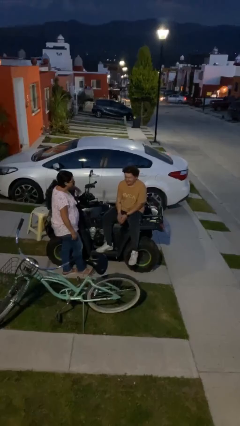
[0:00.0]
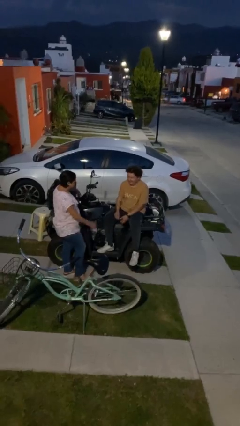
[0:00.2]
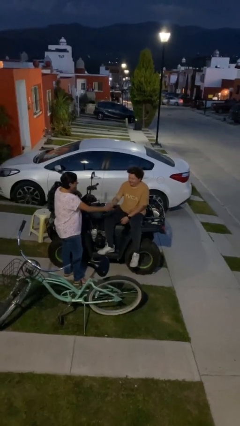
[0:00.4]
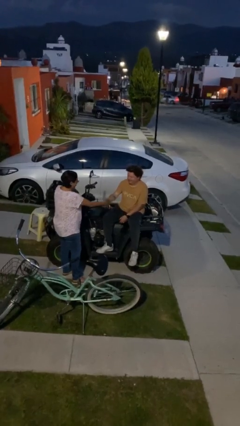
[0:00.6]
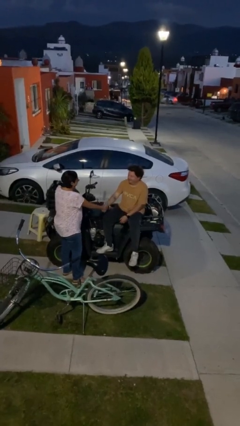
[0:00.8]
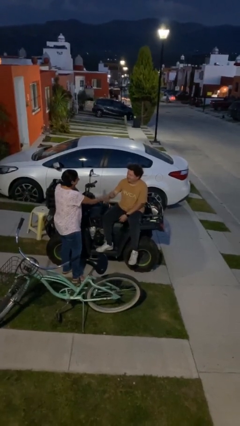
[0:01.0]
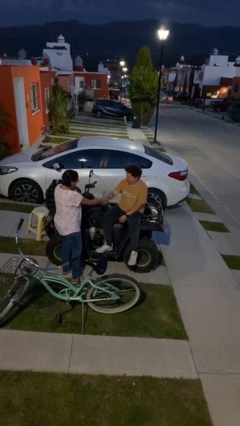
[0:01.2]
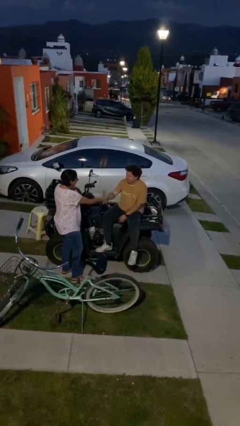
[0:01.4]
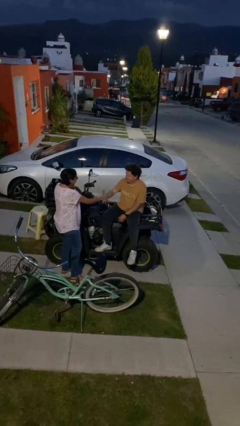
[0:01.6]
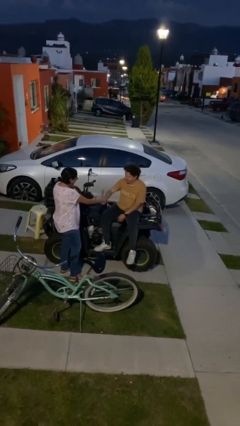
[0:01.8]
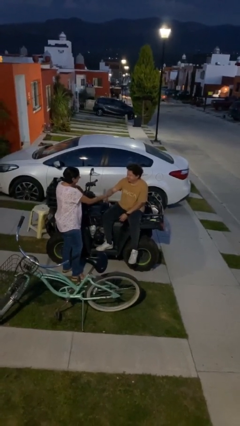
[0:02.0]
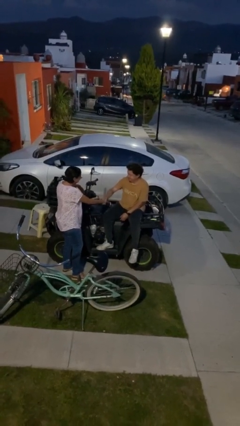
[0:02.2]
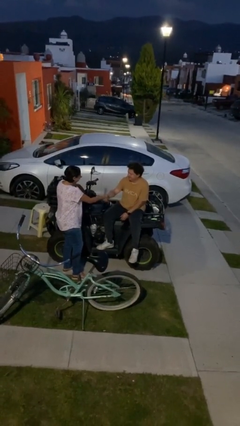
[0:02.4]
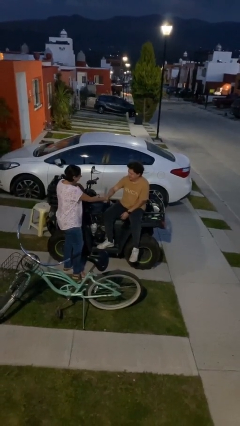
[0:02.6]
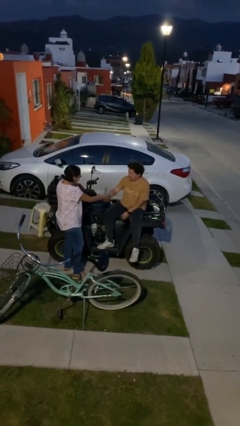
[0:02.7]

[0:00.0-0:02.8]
person shakes hand

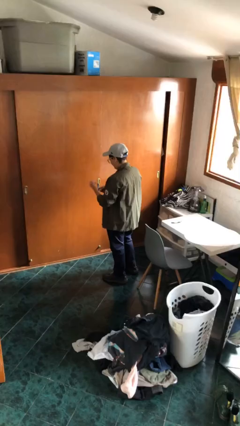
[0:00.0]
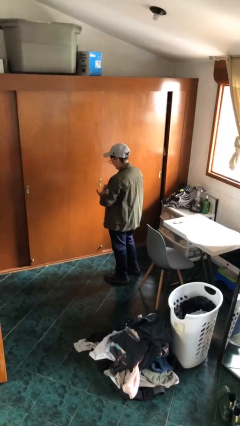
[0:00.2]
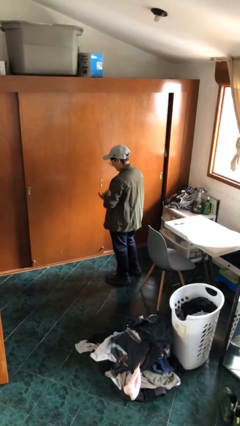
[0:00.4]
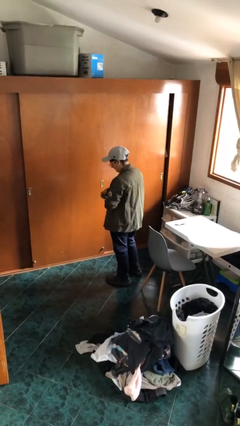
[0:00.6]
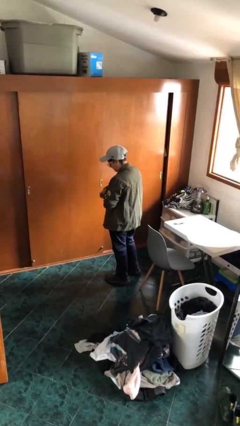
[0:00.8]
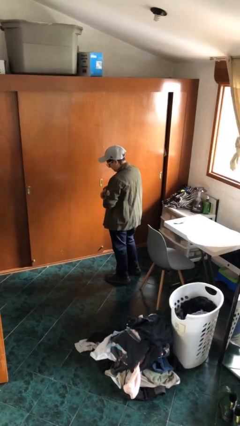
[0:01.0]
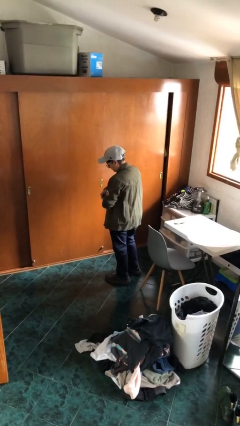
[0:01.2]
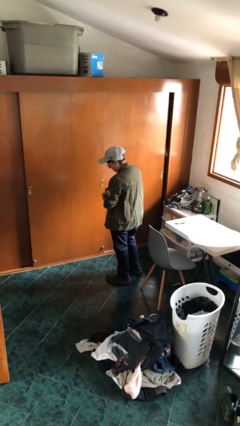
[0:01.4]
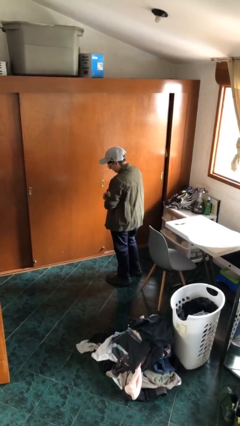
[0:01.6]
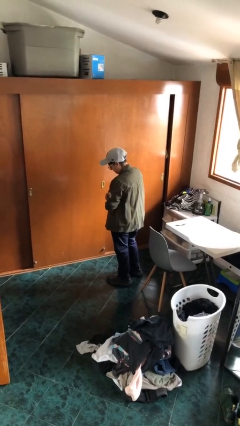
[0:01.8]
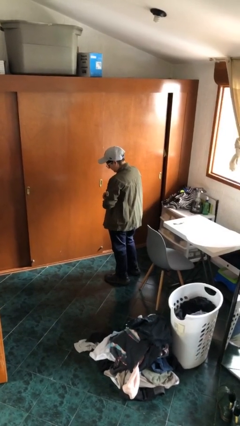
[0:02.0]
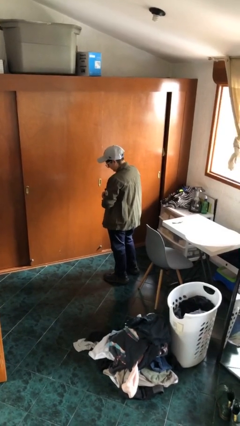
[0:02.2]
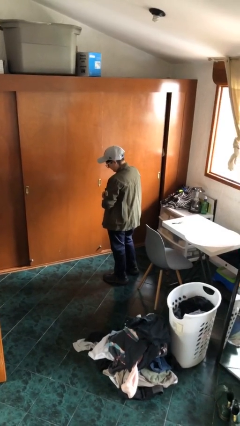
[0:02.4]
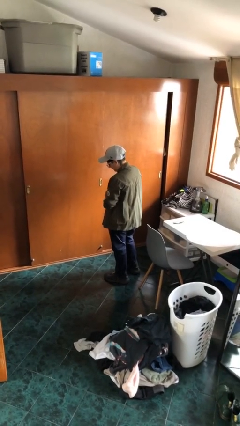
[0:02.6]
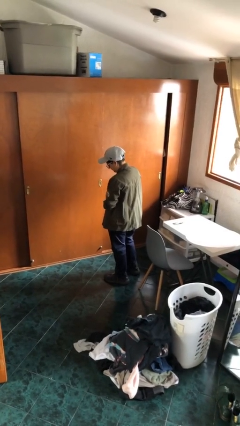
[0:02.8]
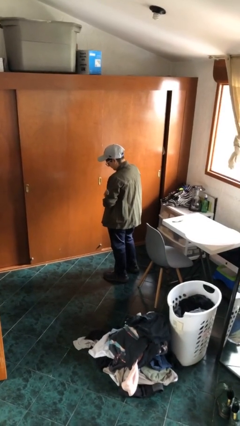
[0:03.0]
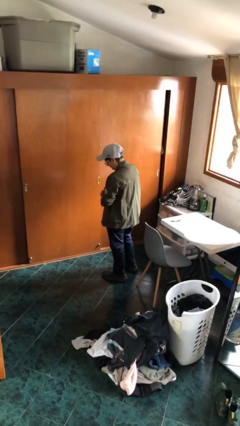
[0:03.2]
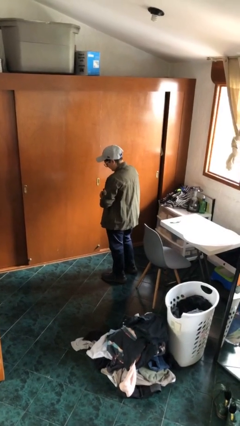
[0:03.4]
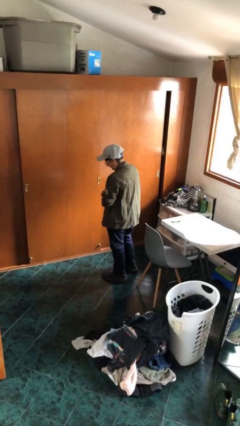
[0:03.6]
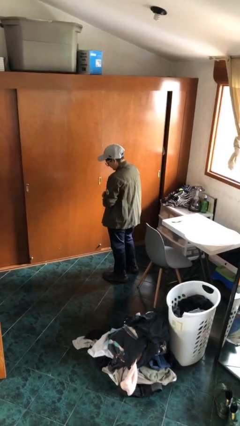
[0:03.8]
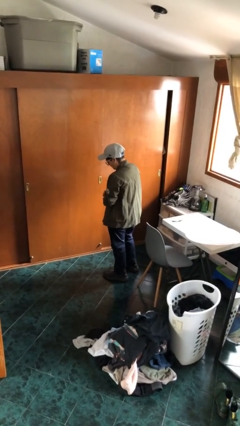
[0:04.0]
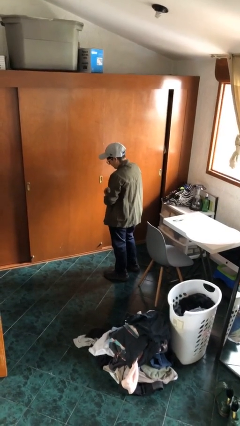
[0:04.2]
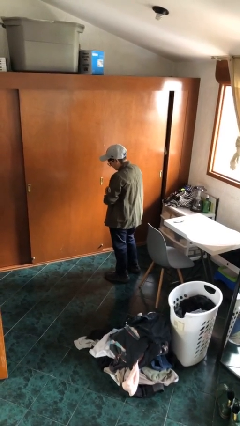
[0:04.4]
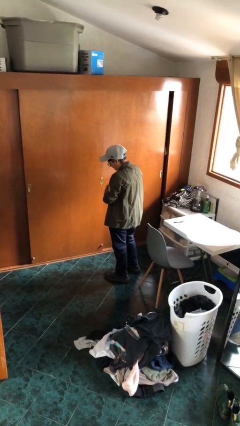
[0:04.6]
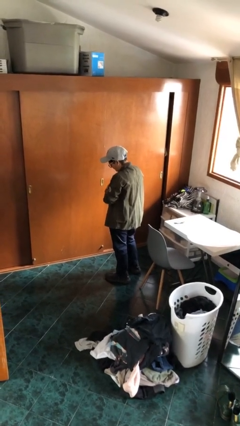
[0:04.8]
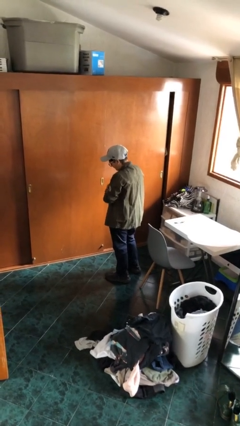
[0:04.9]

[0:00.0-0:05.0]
person puts on wristwatch

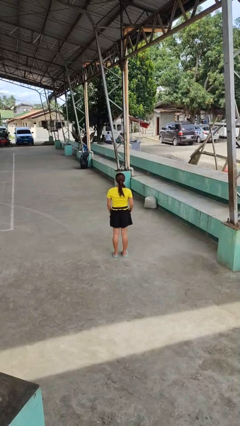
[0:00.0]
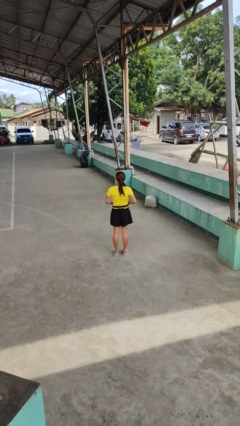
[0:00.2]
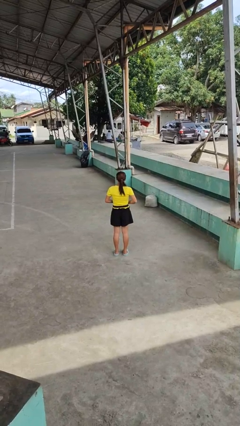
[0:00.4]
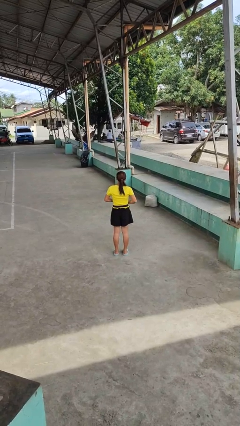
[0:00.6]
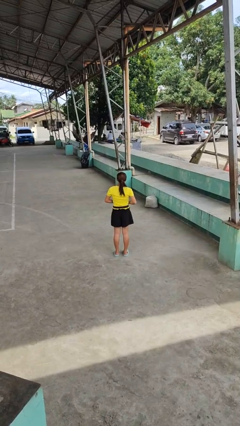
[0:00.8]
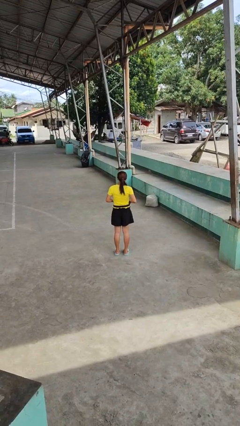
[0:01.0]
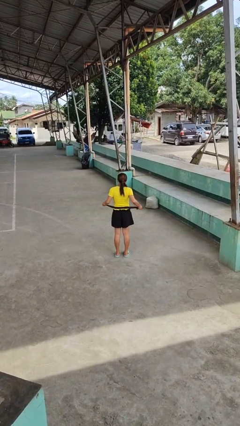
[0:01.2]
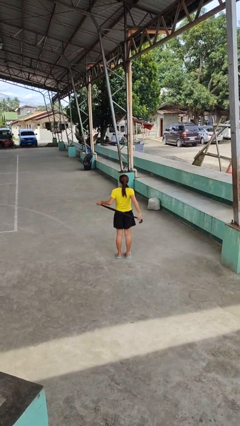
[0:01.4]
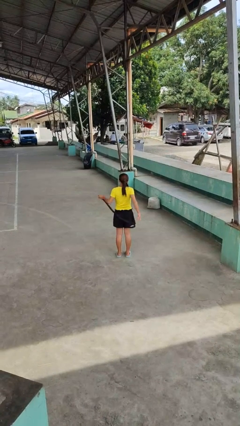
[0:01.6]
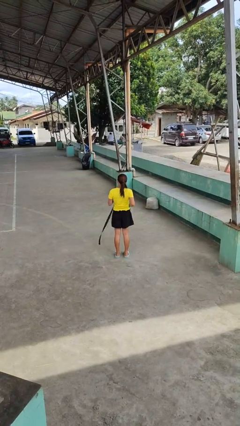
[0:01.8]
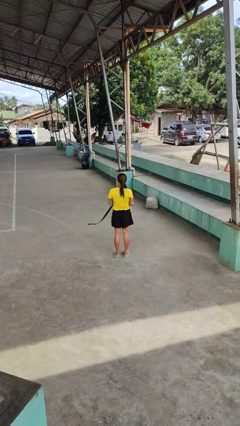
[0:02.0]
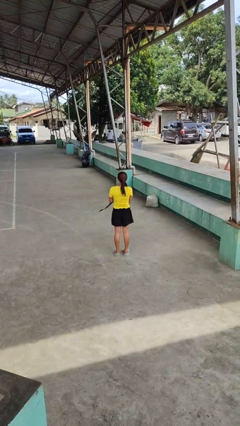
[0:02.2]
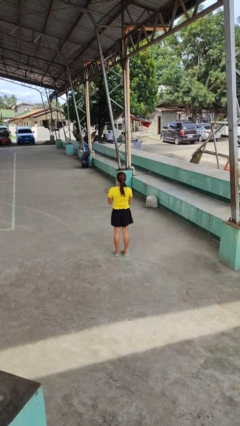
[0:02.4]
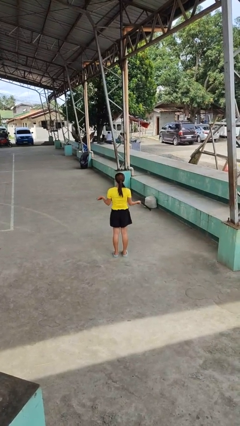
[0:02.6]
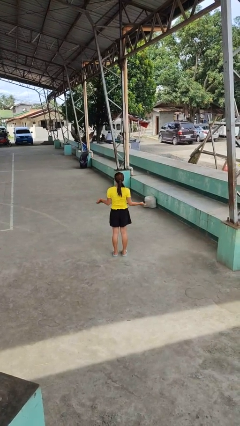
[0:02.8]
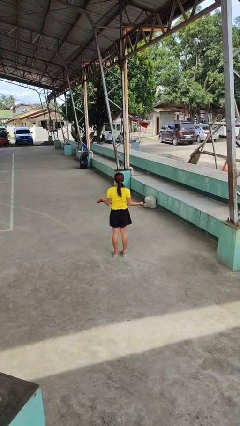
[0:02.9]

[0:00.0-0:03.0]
person takes off belt

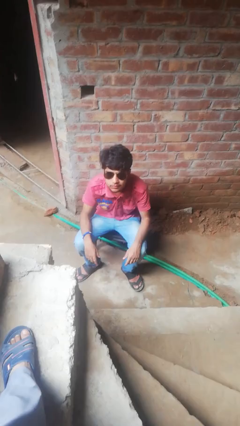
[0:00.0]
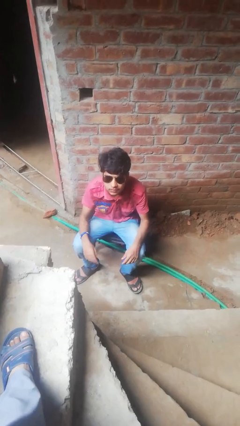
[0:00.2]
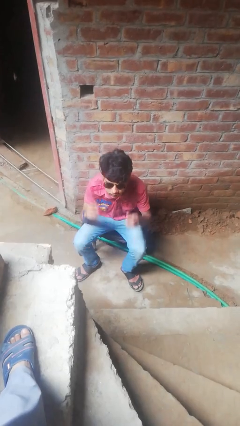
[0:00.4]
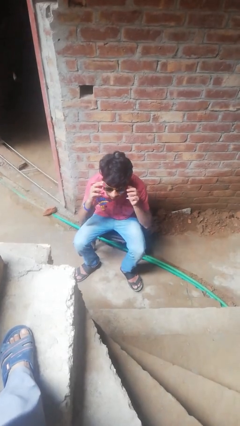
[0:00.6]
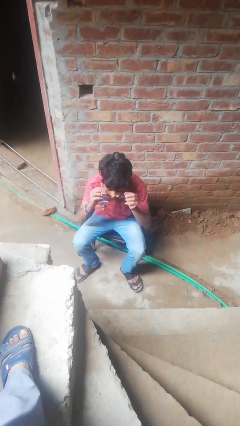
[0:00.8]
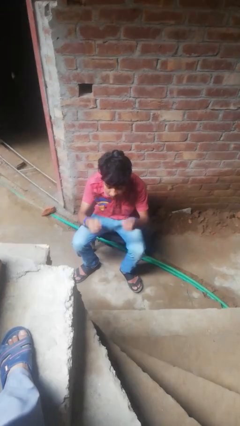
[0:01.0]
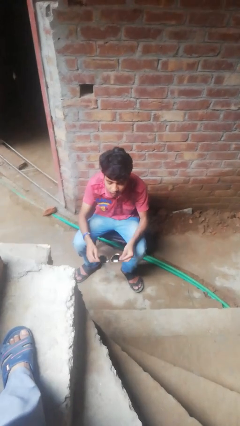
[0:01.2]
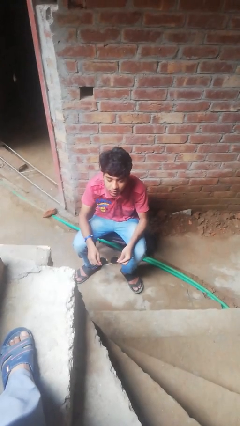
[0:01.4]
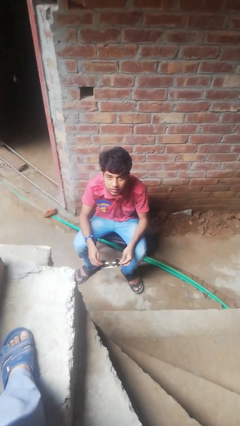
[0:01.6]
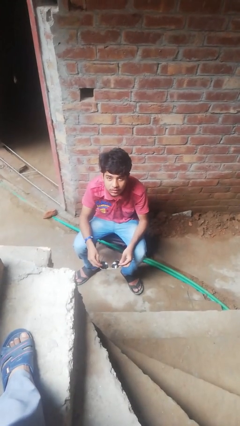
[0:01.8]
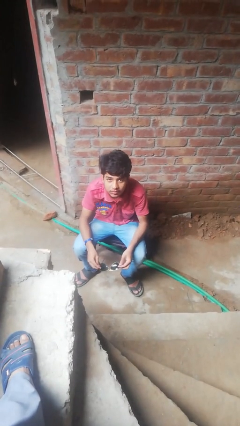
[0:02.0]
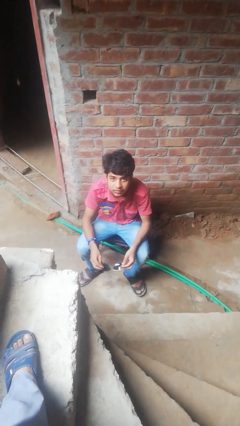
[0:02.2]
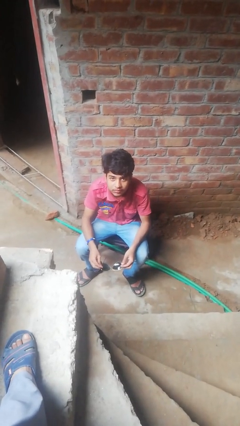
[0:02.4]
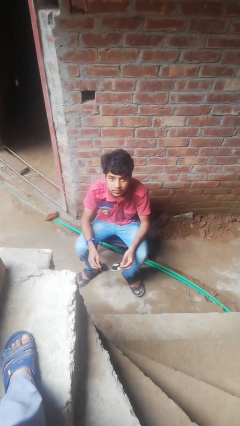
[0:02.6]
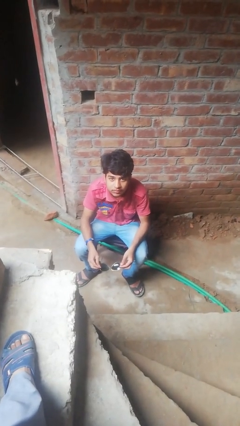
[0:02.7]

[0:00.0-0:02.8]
person takes off glasses

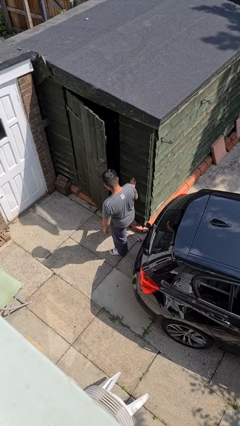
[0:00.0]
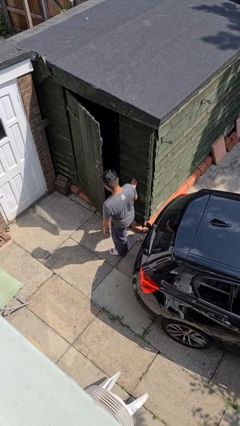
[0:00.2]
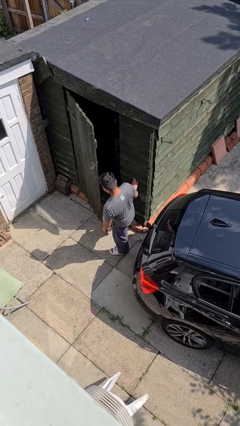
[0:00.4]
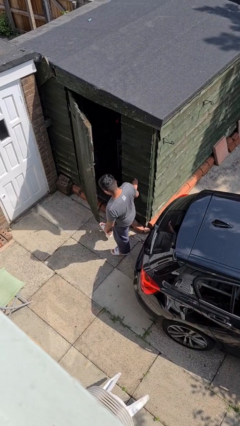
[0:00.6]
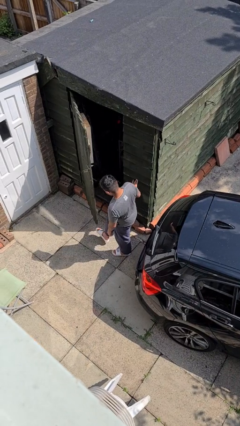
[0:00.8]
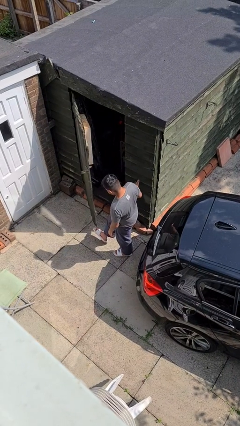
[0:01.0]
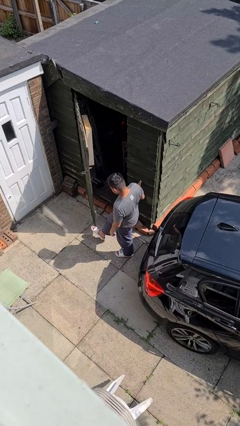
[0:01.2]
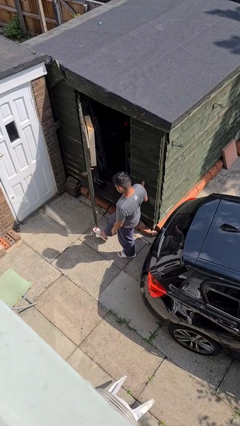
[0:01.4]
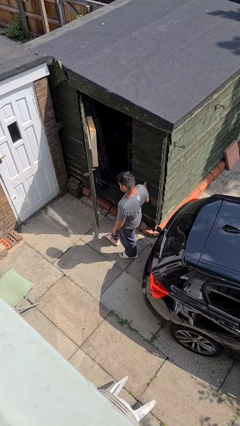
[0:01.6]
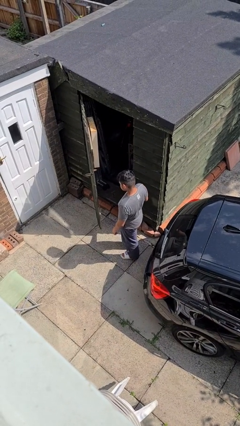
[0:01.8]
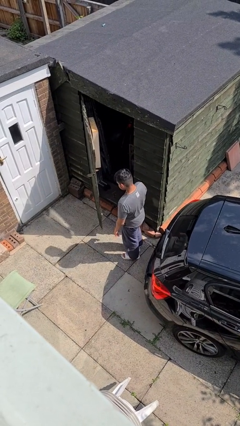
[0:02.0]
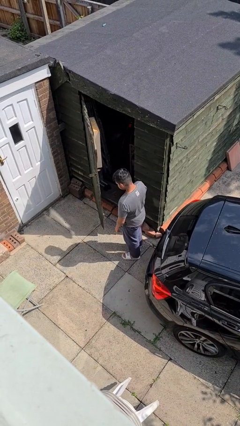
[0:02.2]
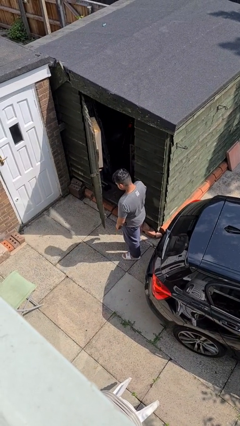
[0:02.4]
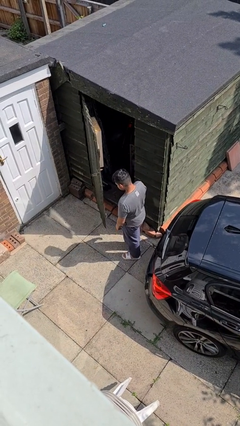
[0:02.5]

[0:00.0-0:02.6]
person opens facility door

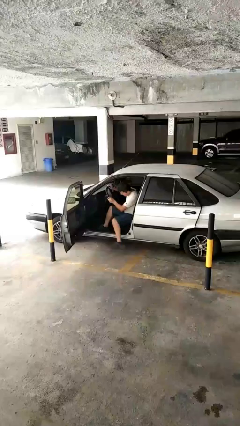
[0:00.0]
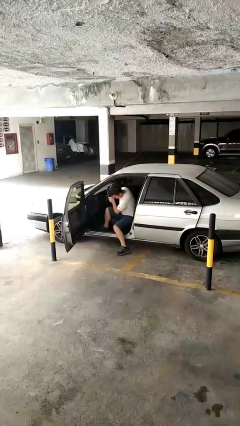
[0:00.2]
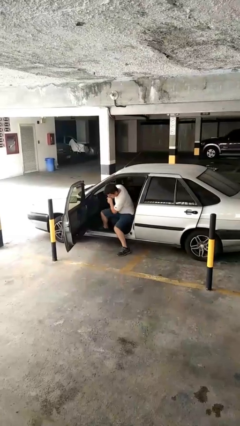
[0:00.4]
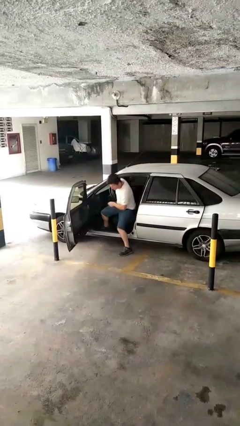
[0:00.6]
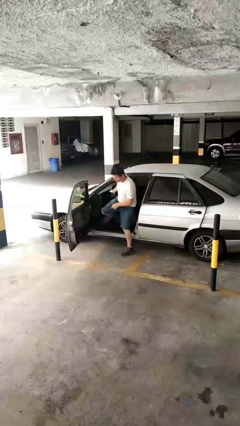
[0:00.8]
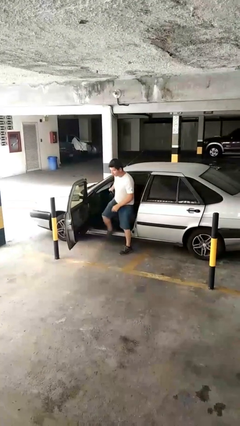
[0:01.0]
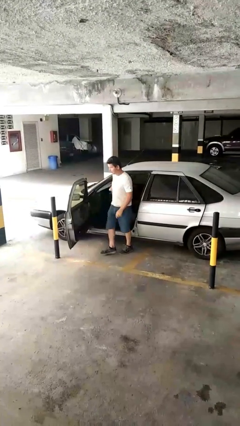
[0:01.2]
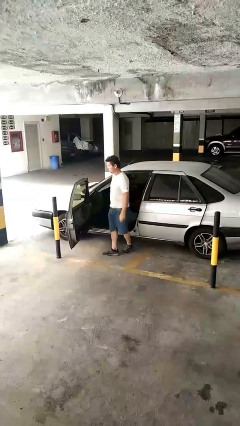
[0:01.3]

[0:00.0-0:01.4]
person exits car
